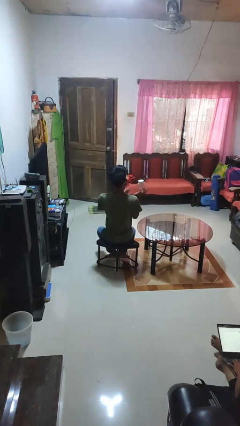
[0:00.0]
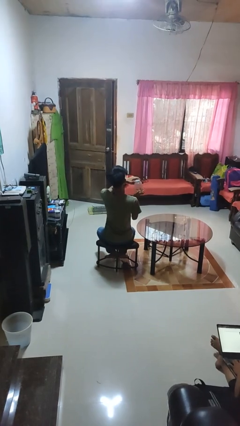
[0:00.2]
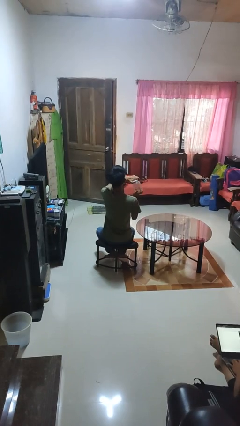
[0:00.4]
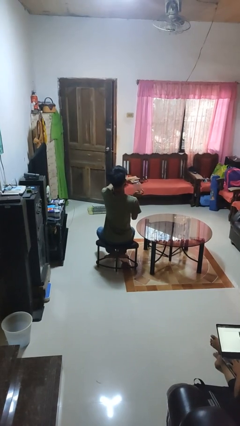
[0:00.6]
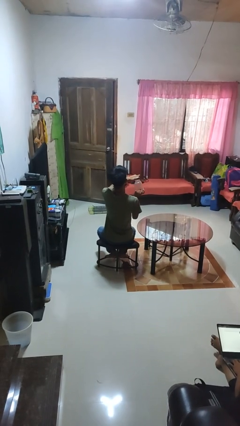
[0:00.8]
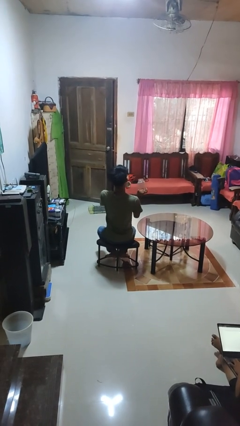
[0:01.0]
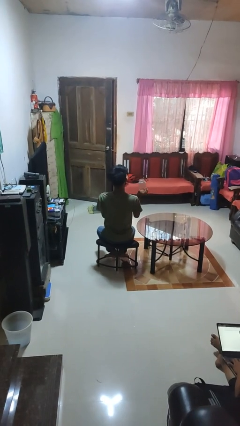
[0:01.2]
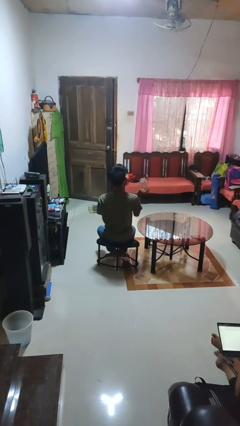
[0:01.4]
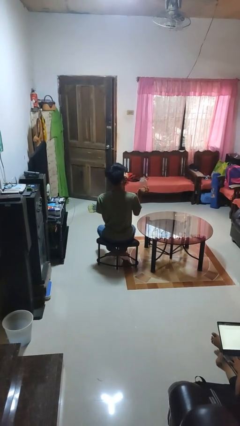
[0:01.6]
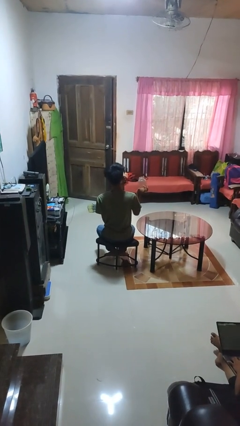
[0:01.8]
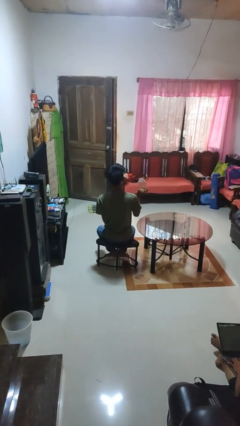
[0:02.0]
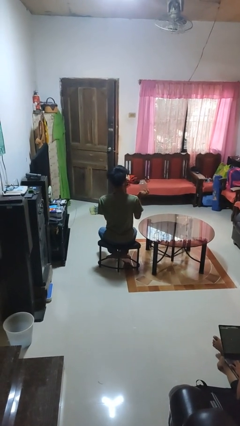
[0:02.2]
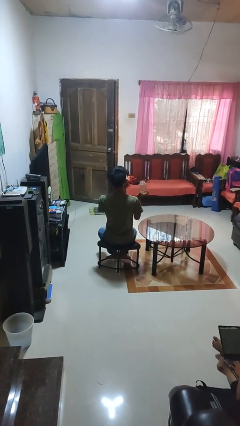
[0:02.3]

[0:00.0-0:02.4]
person opens jar

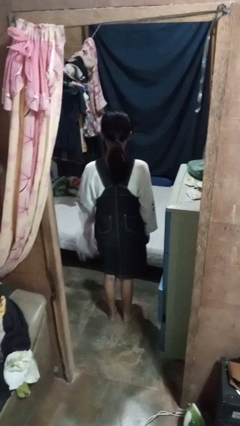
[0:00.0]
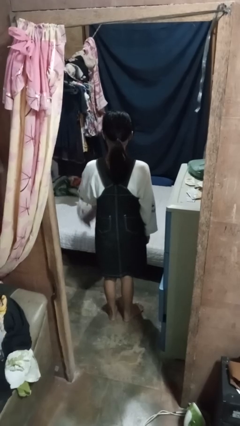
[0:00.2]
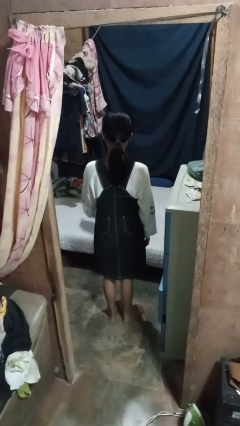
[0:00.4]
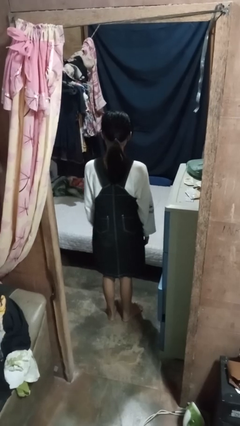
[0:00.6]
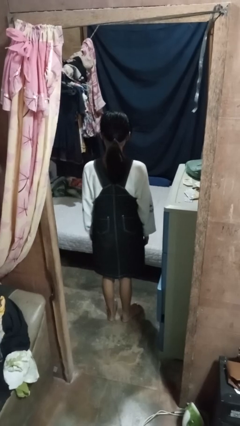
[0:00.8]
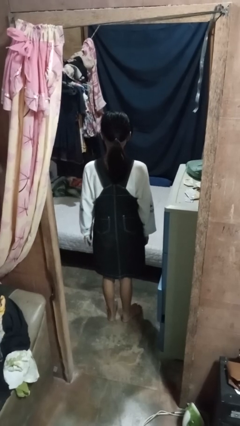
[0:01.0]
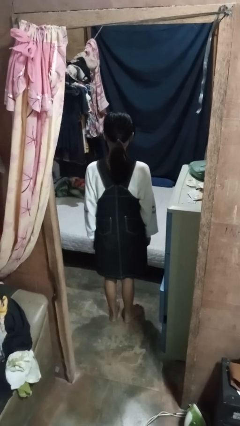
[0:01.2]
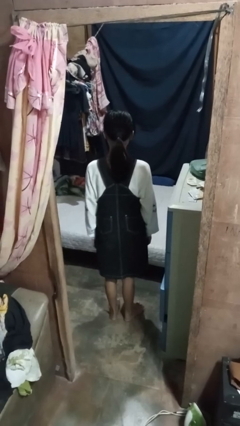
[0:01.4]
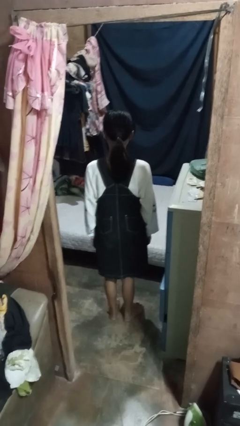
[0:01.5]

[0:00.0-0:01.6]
person throws object on bed

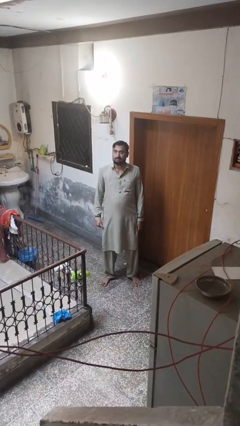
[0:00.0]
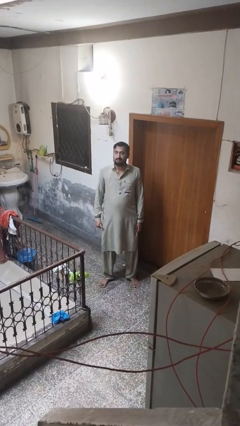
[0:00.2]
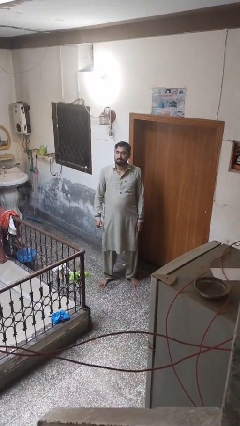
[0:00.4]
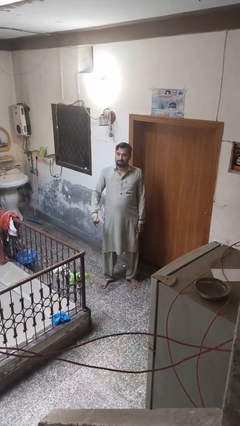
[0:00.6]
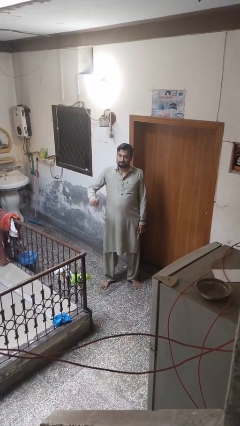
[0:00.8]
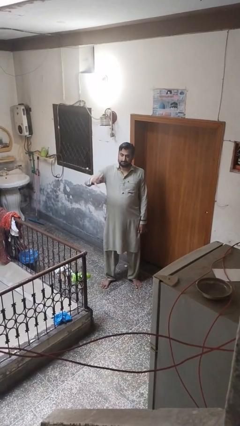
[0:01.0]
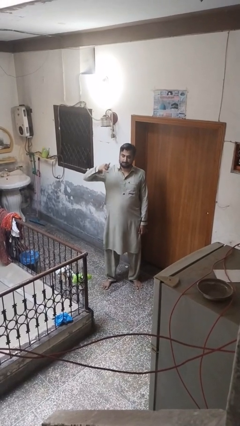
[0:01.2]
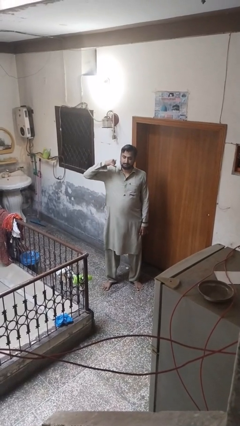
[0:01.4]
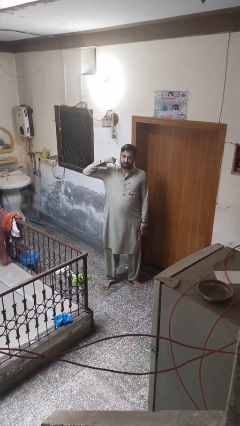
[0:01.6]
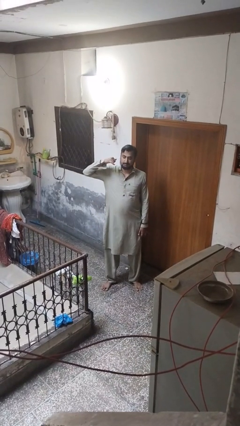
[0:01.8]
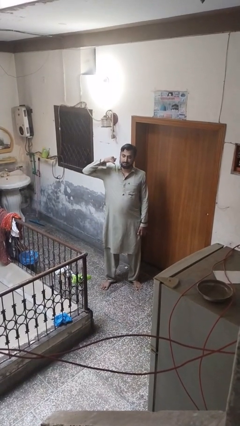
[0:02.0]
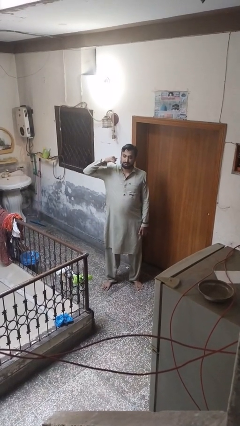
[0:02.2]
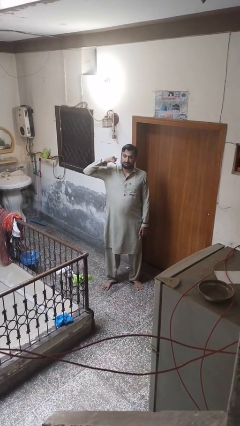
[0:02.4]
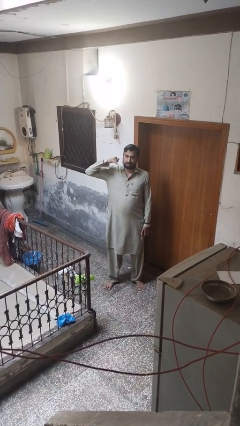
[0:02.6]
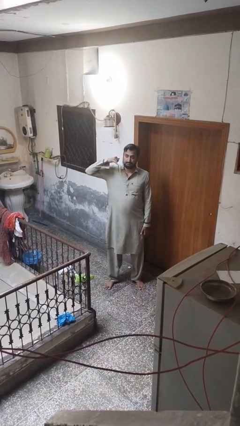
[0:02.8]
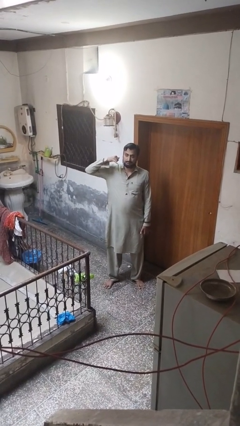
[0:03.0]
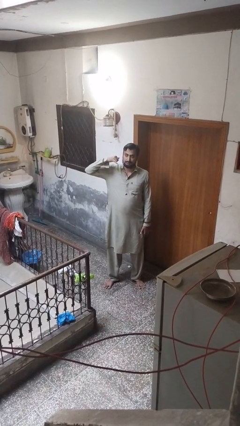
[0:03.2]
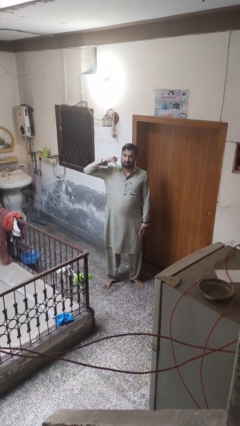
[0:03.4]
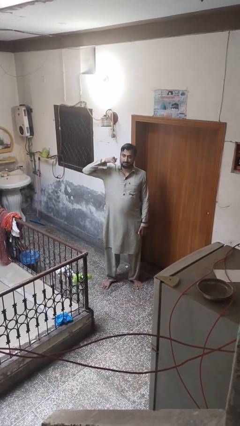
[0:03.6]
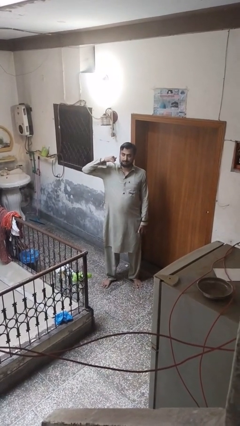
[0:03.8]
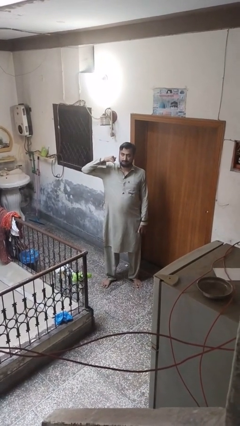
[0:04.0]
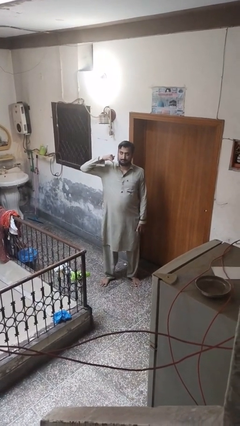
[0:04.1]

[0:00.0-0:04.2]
person gestures call me

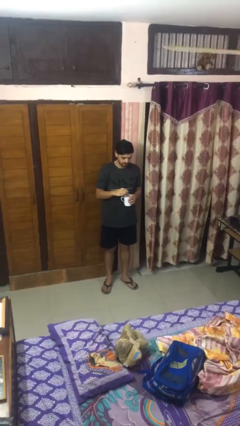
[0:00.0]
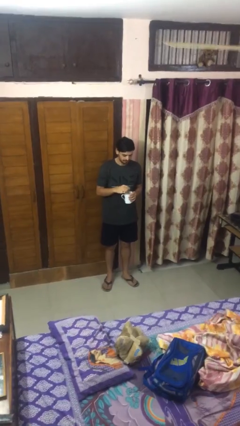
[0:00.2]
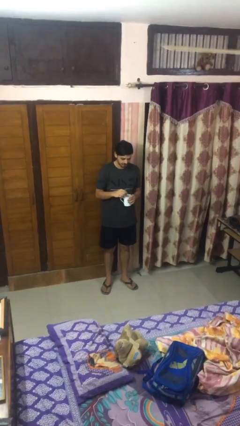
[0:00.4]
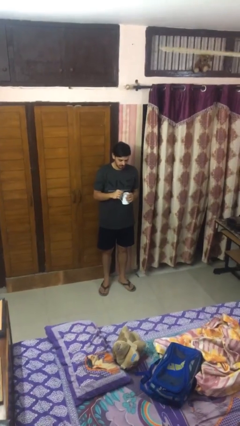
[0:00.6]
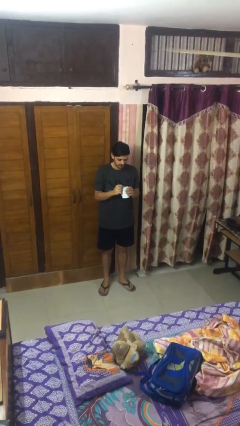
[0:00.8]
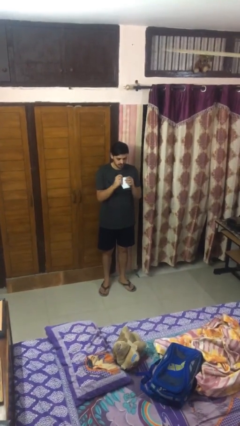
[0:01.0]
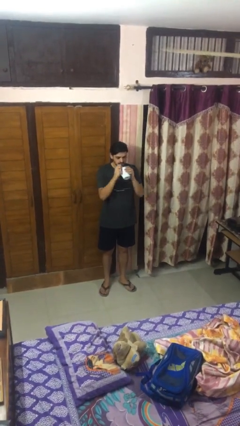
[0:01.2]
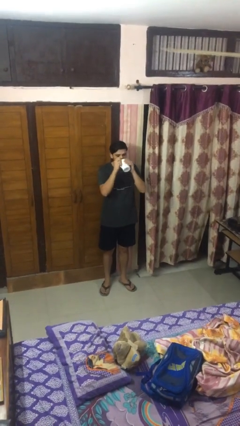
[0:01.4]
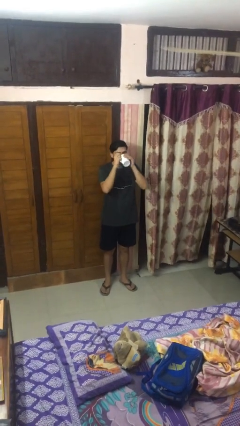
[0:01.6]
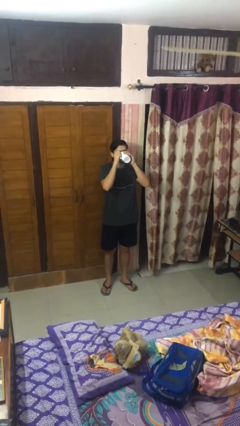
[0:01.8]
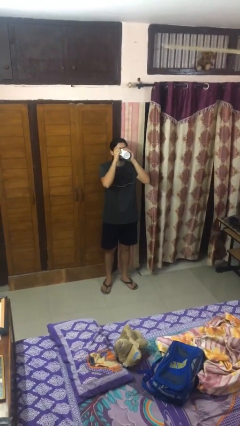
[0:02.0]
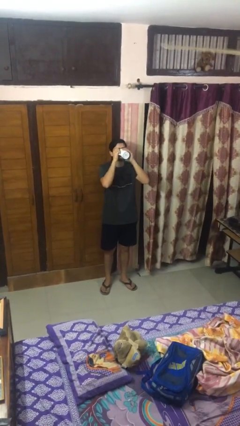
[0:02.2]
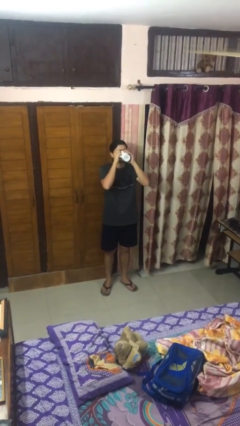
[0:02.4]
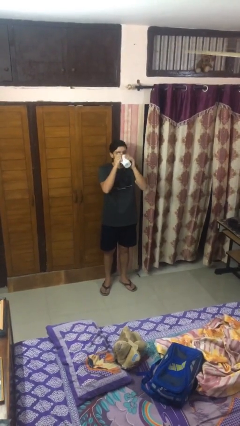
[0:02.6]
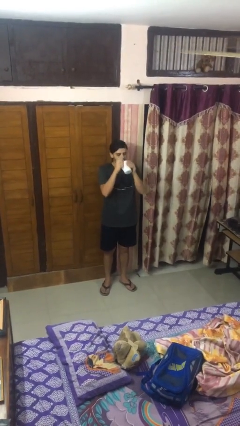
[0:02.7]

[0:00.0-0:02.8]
person drinks from mug

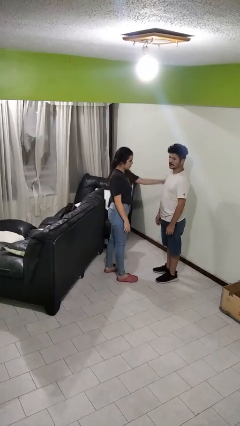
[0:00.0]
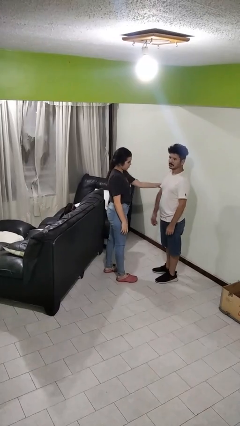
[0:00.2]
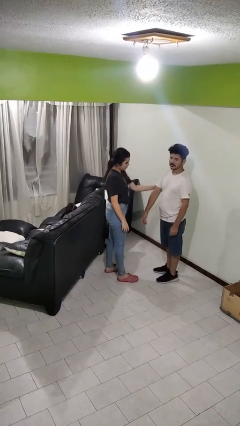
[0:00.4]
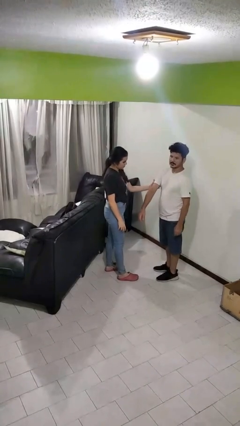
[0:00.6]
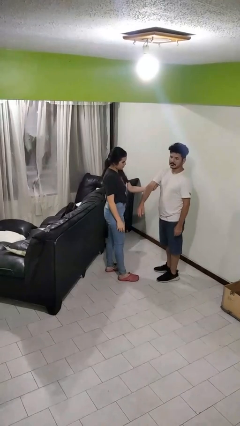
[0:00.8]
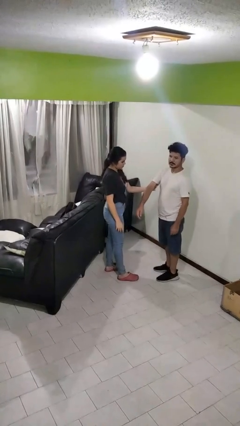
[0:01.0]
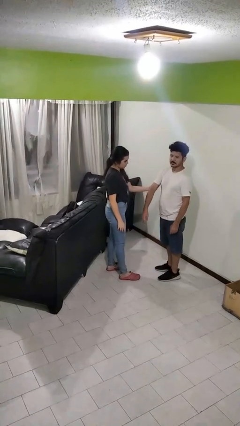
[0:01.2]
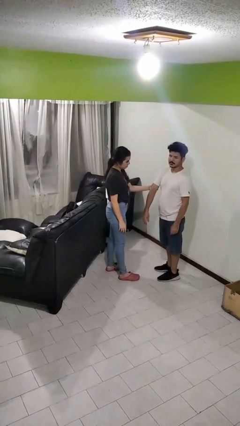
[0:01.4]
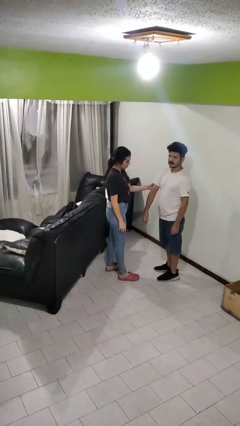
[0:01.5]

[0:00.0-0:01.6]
person grabs person by bicep

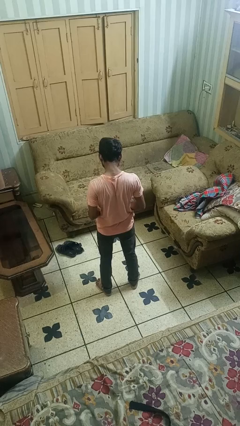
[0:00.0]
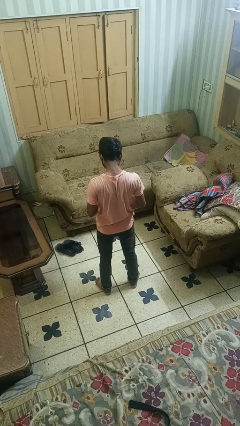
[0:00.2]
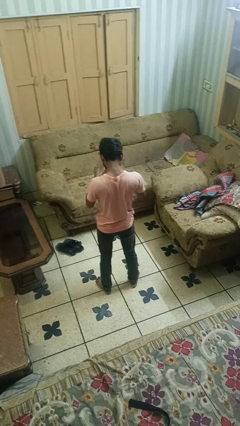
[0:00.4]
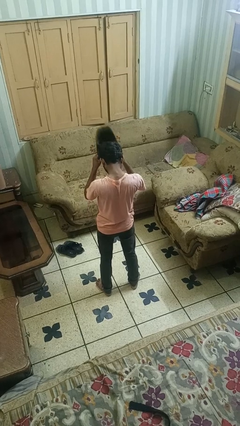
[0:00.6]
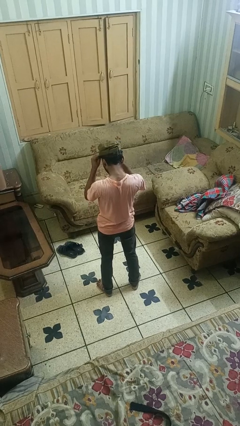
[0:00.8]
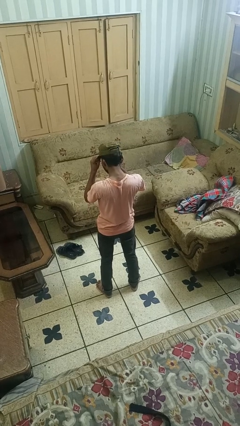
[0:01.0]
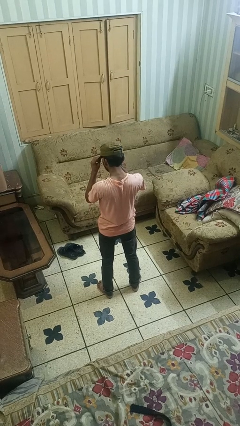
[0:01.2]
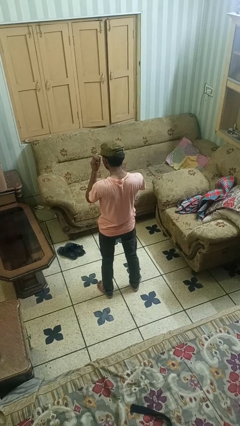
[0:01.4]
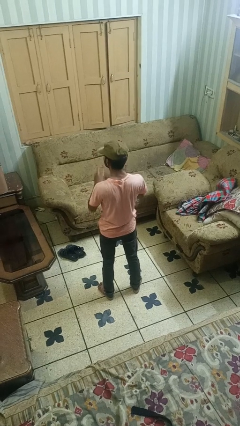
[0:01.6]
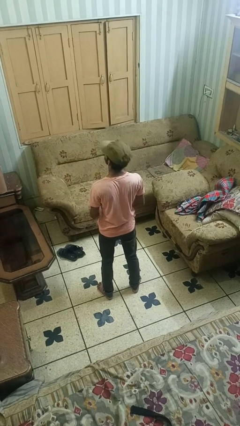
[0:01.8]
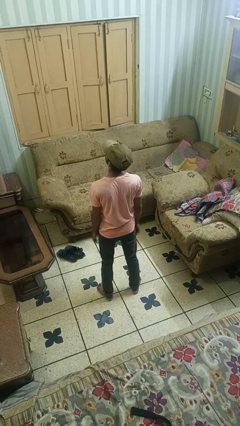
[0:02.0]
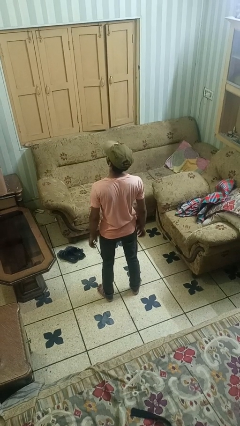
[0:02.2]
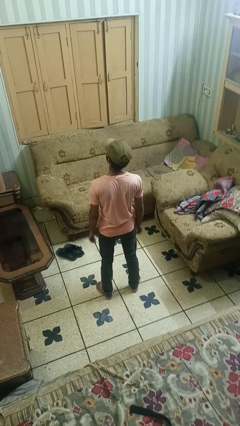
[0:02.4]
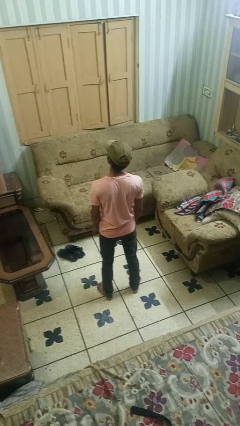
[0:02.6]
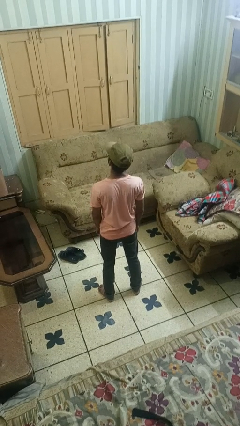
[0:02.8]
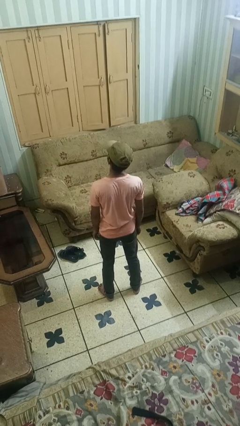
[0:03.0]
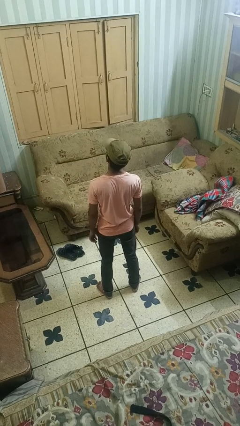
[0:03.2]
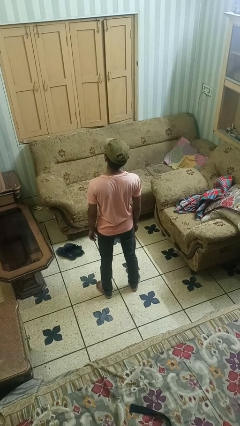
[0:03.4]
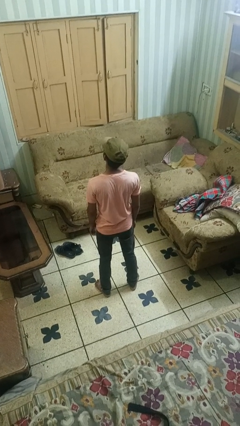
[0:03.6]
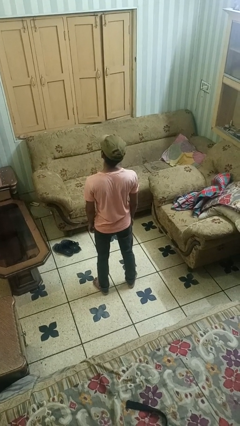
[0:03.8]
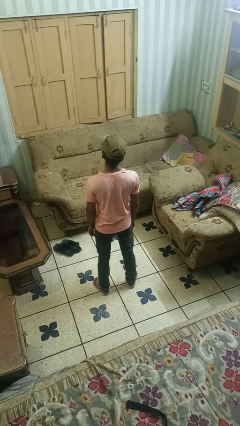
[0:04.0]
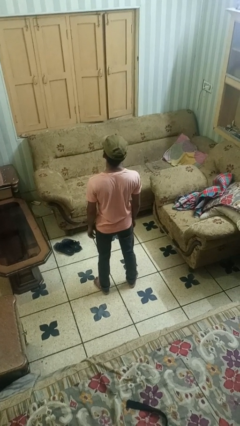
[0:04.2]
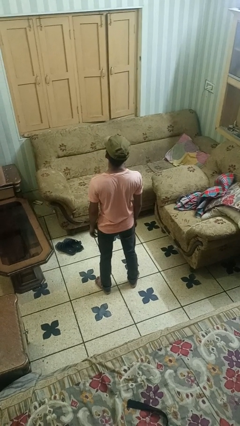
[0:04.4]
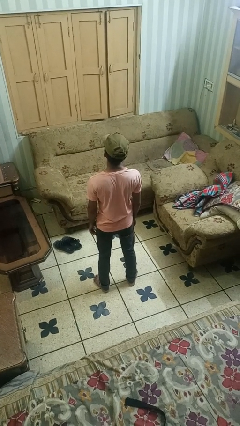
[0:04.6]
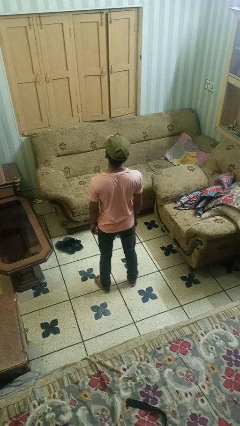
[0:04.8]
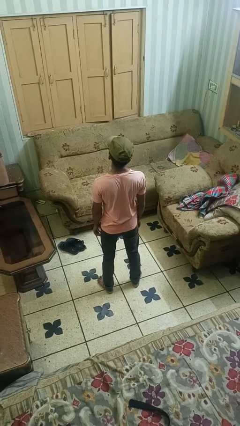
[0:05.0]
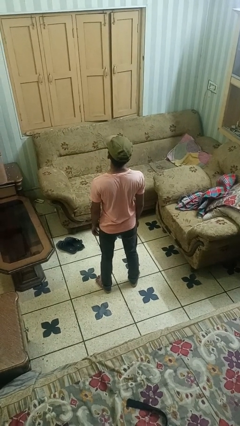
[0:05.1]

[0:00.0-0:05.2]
person puts on hat
